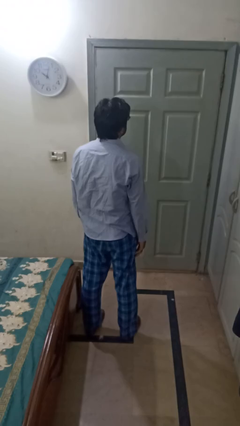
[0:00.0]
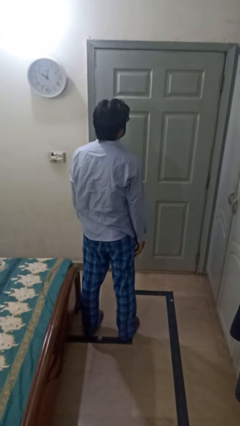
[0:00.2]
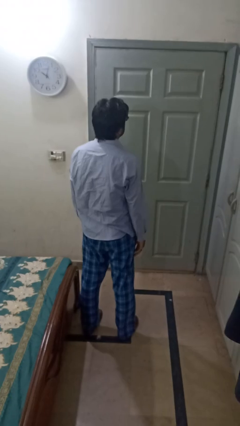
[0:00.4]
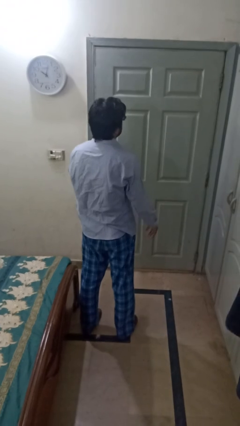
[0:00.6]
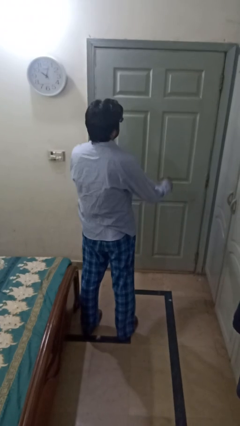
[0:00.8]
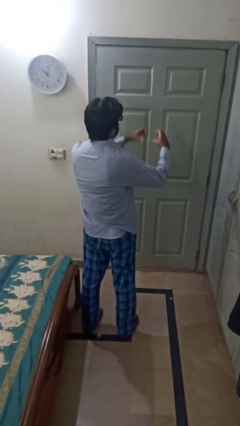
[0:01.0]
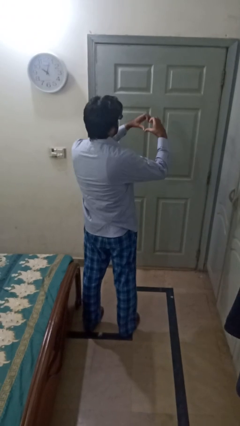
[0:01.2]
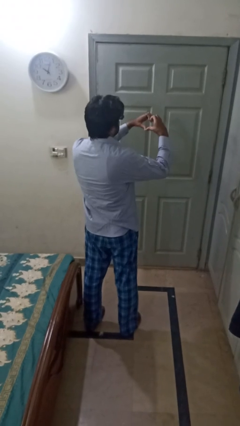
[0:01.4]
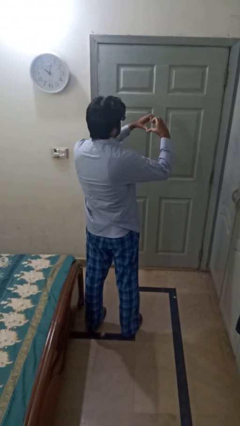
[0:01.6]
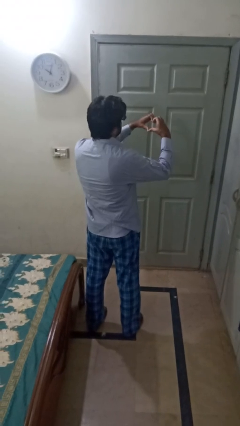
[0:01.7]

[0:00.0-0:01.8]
person gestures heart

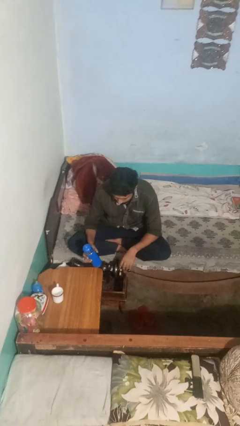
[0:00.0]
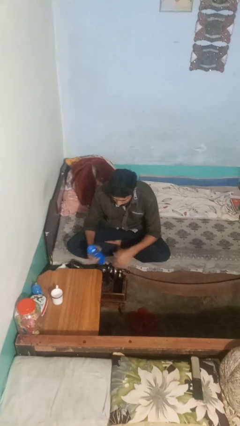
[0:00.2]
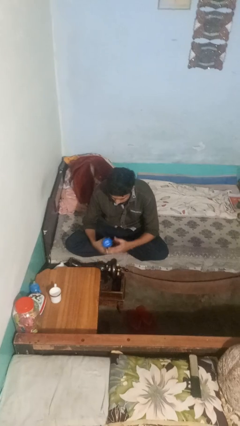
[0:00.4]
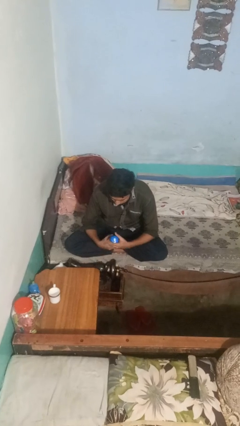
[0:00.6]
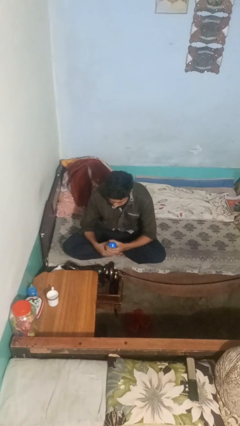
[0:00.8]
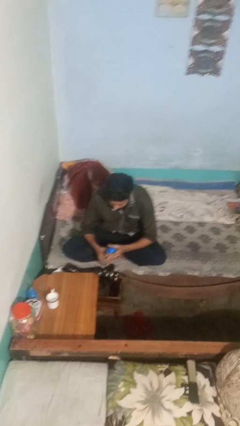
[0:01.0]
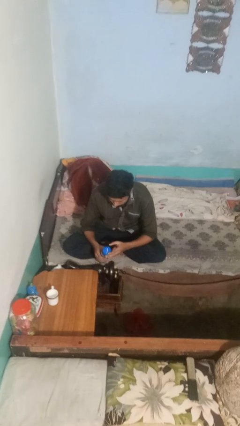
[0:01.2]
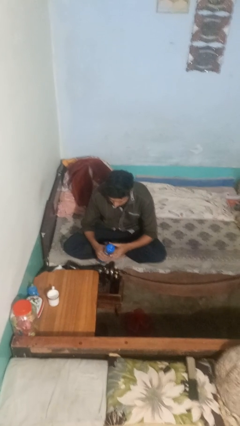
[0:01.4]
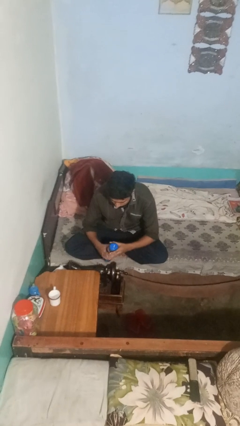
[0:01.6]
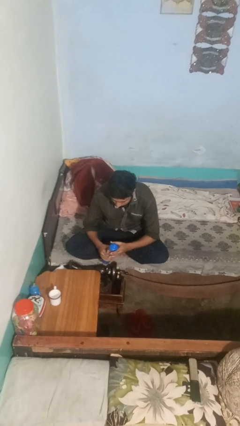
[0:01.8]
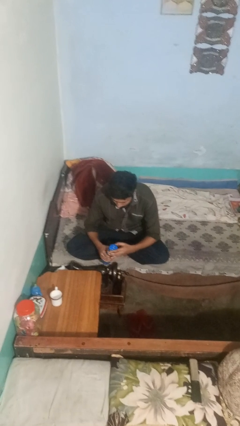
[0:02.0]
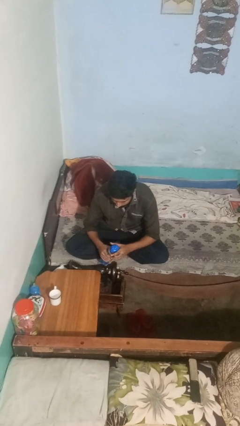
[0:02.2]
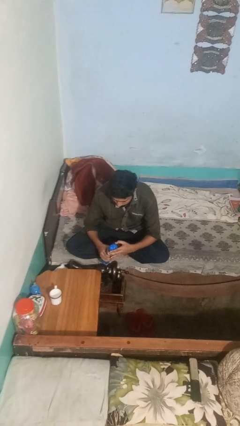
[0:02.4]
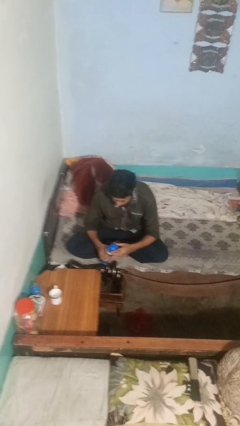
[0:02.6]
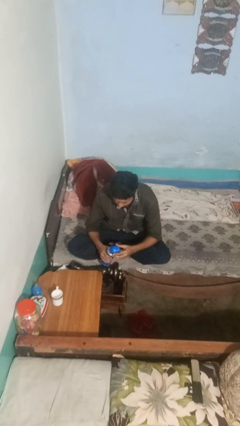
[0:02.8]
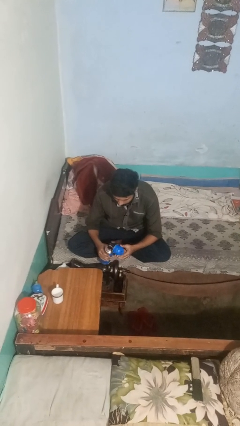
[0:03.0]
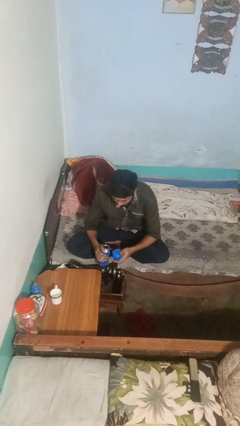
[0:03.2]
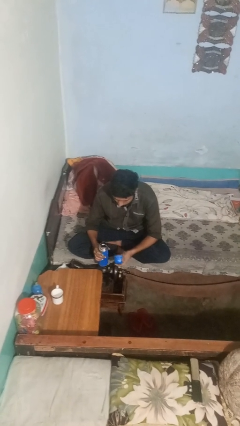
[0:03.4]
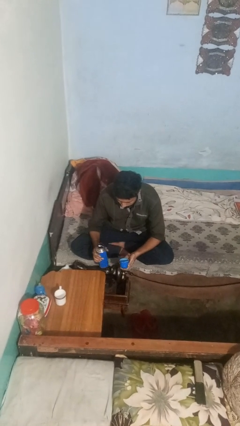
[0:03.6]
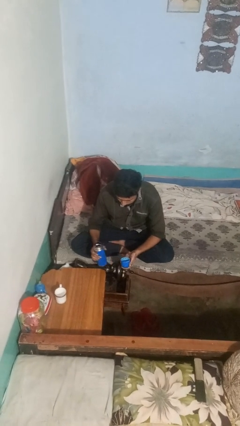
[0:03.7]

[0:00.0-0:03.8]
person unscrews lid from bottle

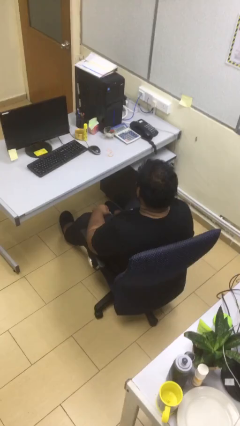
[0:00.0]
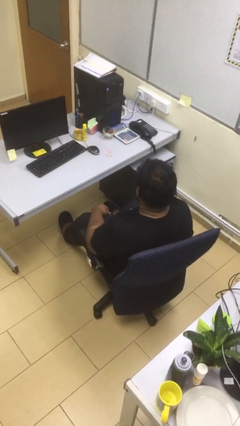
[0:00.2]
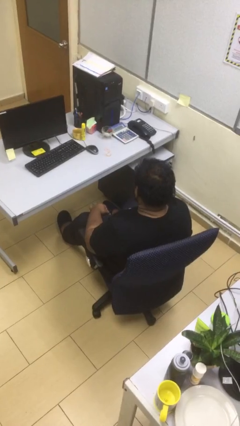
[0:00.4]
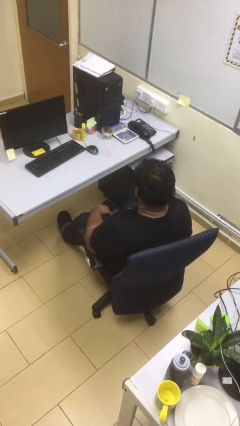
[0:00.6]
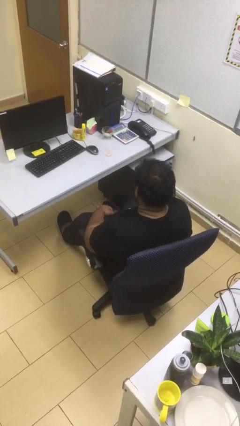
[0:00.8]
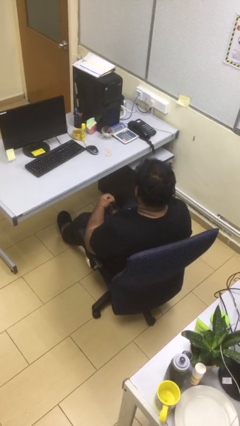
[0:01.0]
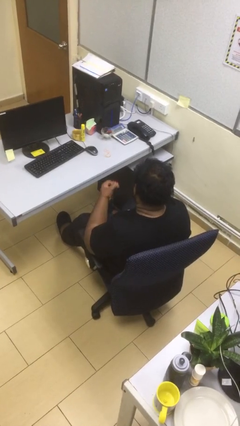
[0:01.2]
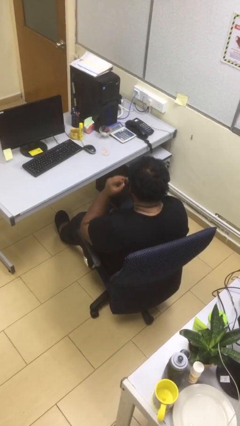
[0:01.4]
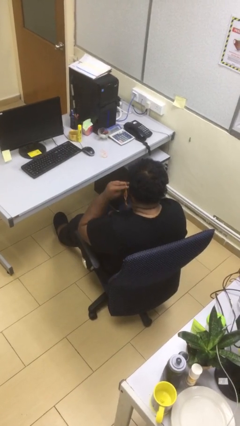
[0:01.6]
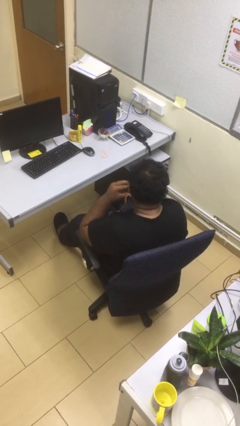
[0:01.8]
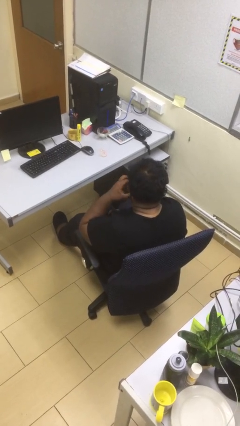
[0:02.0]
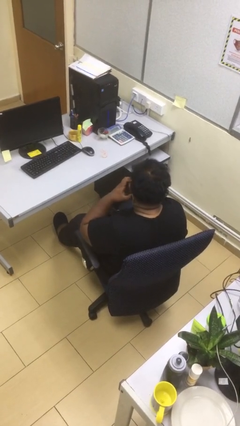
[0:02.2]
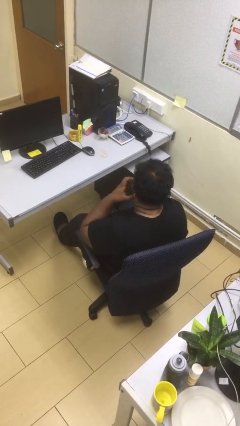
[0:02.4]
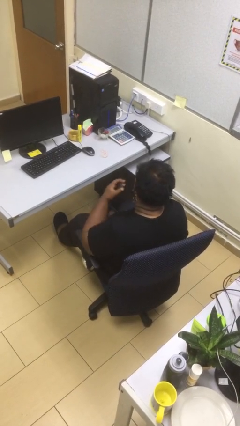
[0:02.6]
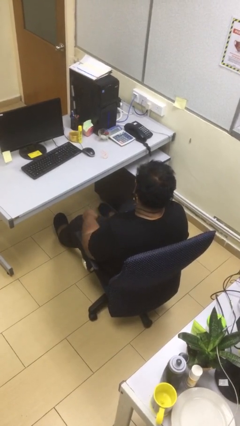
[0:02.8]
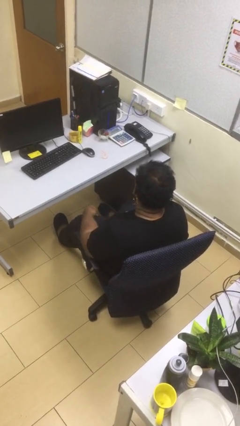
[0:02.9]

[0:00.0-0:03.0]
person puts on earrings

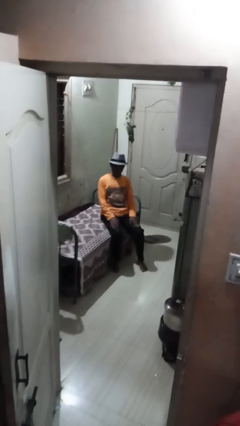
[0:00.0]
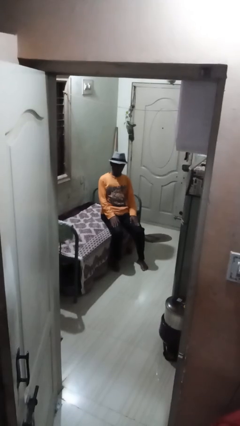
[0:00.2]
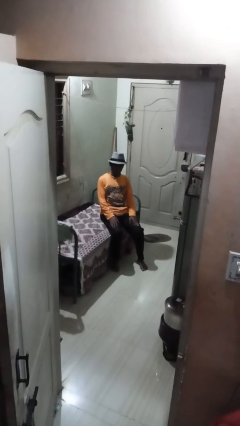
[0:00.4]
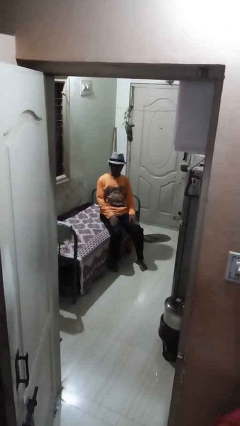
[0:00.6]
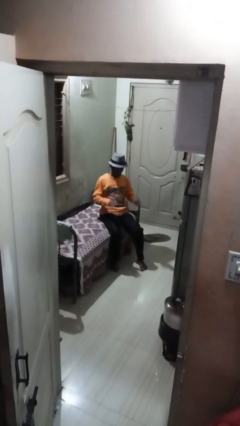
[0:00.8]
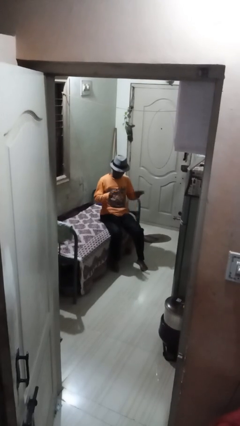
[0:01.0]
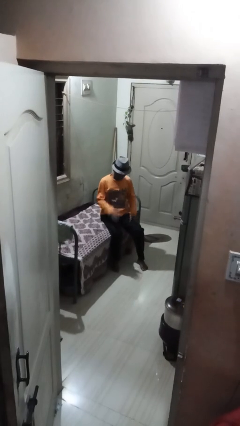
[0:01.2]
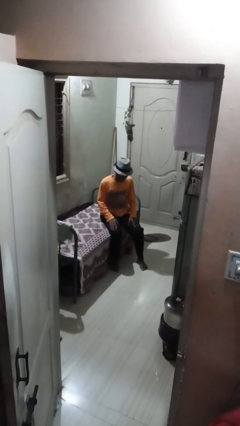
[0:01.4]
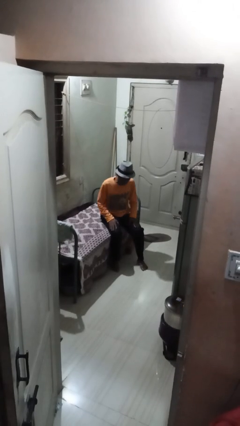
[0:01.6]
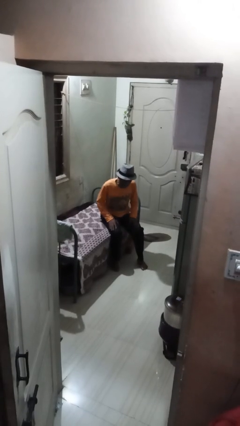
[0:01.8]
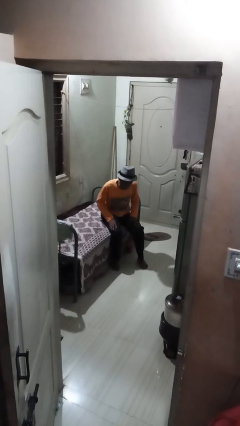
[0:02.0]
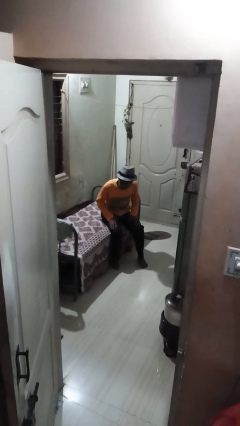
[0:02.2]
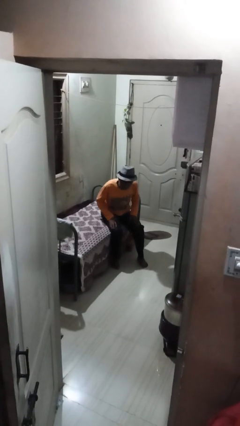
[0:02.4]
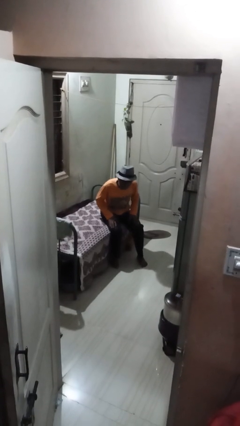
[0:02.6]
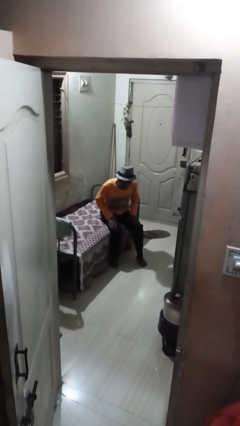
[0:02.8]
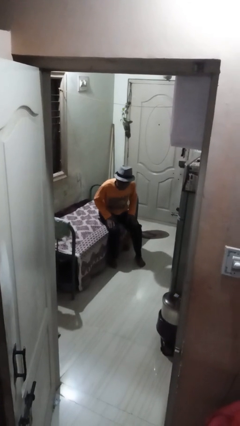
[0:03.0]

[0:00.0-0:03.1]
person slaps hands on thighs

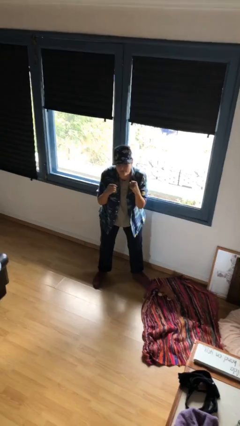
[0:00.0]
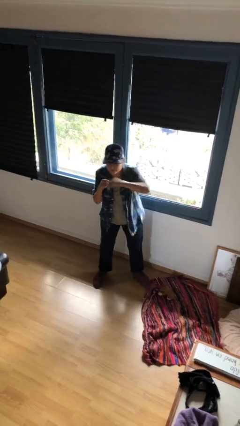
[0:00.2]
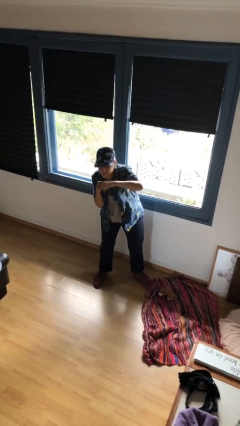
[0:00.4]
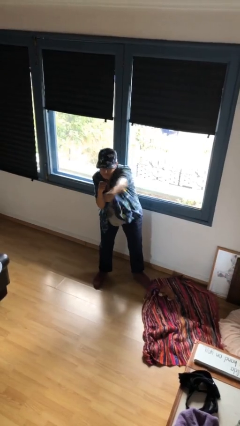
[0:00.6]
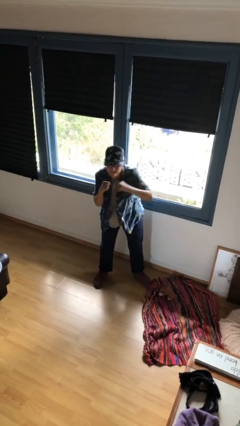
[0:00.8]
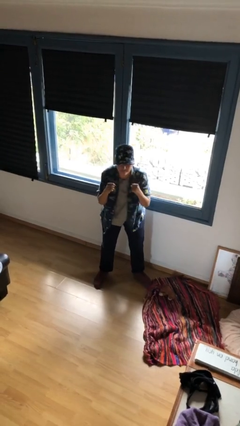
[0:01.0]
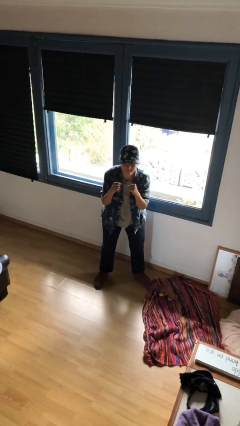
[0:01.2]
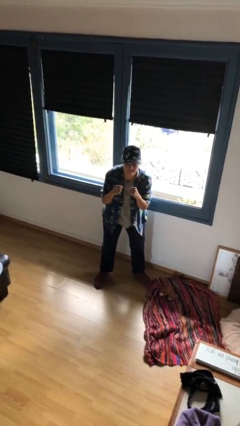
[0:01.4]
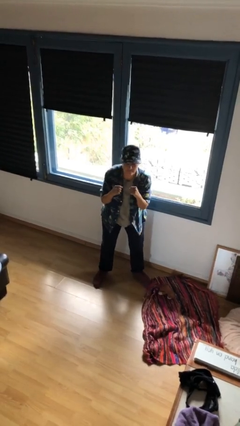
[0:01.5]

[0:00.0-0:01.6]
person punches

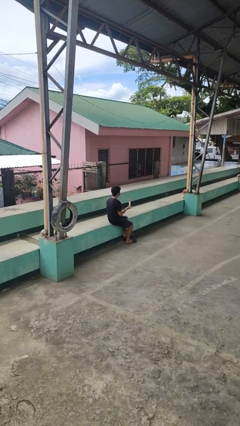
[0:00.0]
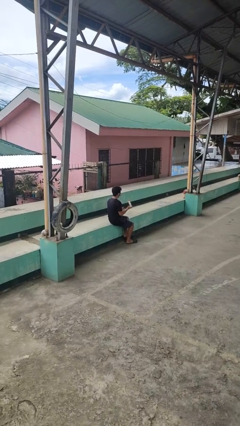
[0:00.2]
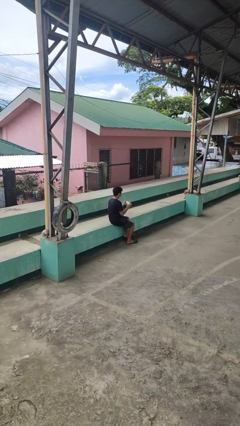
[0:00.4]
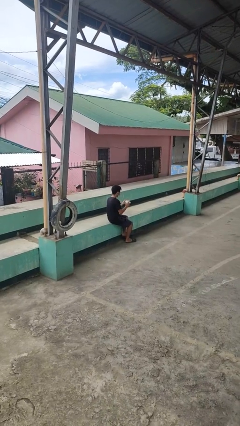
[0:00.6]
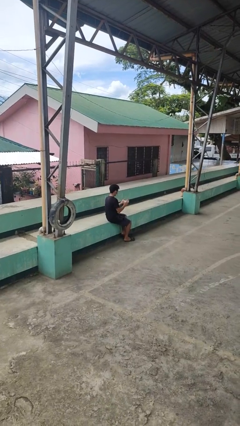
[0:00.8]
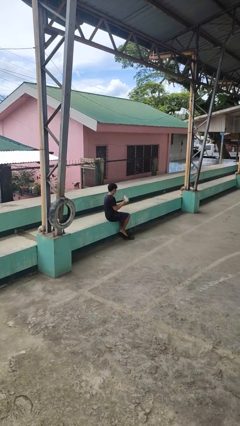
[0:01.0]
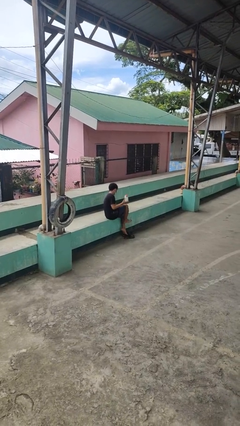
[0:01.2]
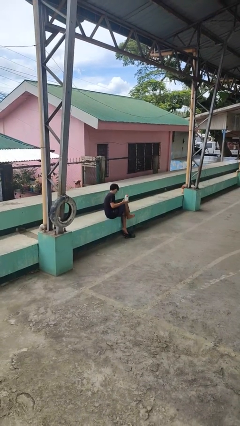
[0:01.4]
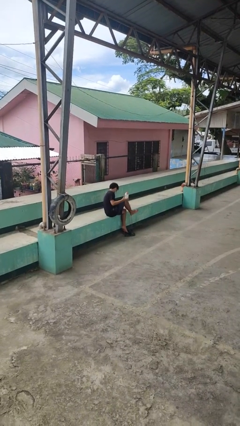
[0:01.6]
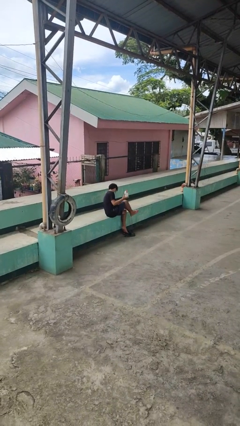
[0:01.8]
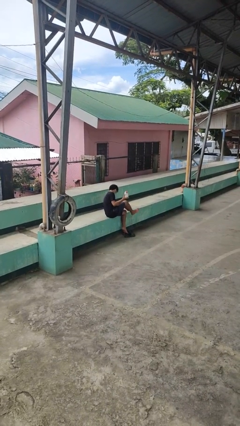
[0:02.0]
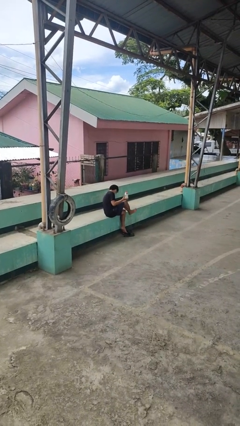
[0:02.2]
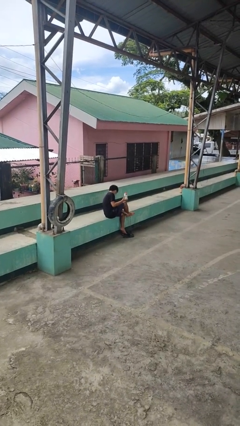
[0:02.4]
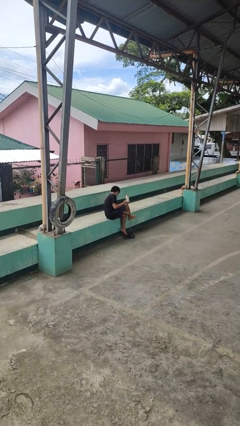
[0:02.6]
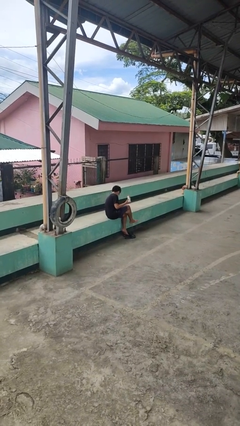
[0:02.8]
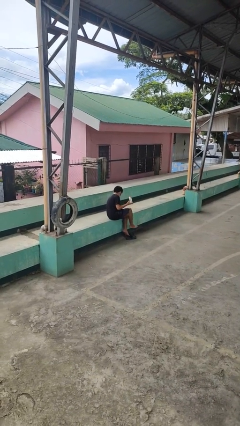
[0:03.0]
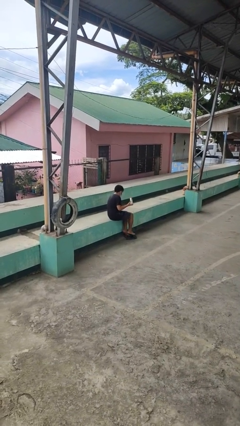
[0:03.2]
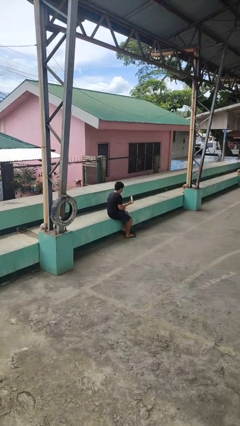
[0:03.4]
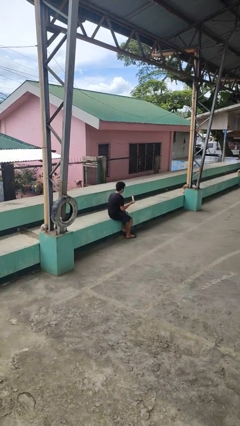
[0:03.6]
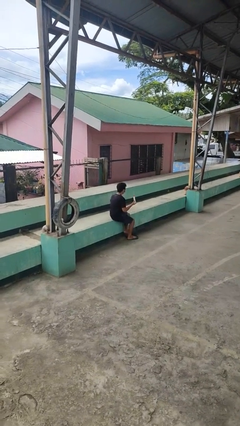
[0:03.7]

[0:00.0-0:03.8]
person applies sunscreen

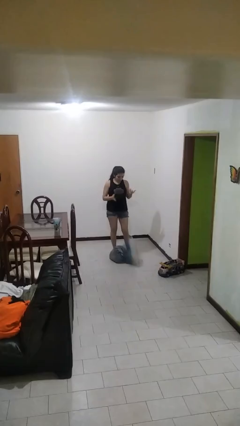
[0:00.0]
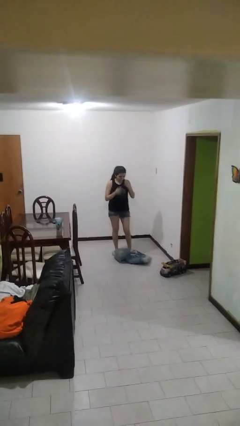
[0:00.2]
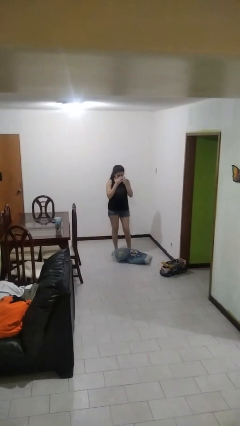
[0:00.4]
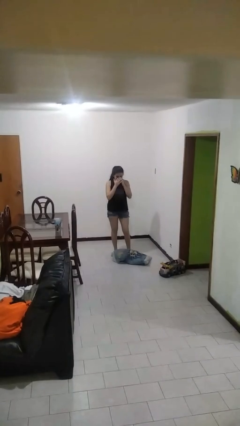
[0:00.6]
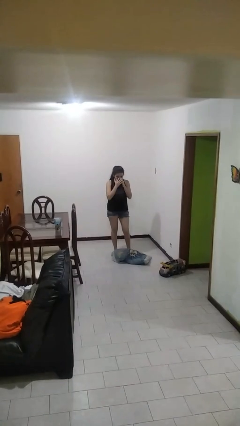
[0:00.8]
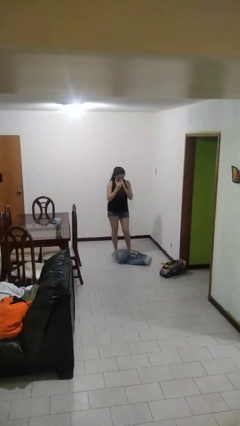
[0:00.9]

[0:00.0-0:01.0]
person drops object
